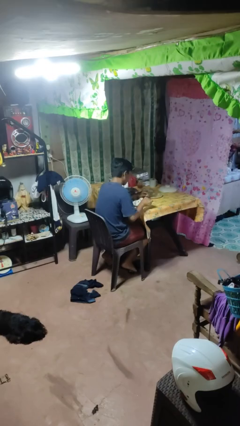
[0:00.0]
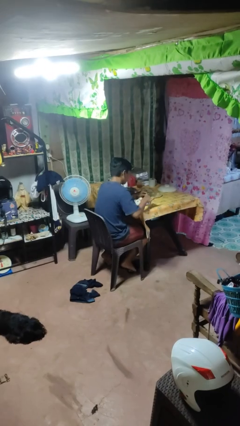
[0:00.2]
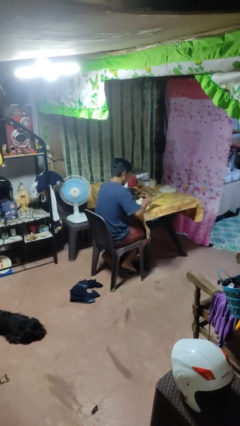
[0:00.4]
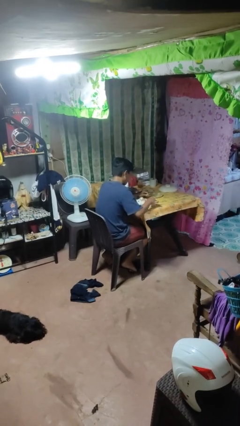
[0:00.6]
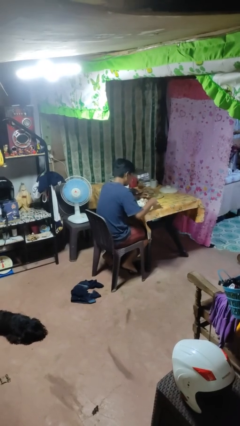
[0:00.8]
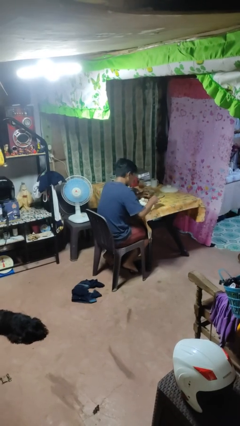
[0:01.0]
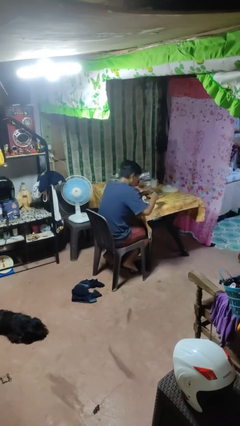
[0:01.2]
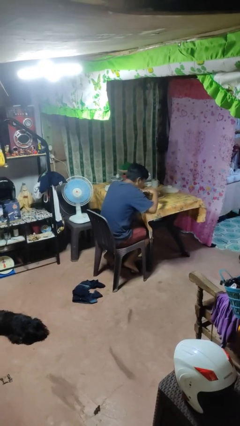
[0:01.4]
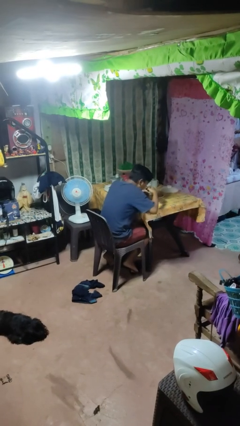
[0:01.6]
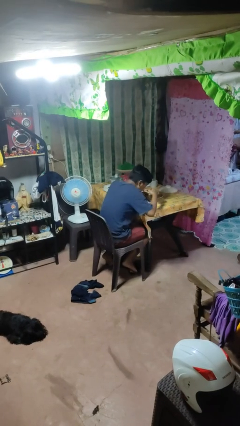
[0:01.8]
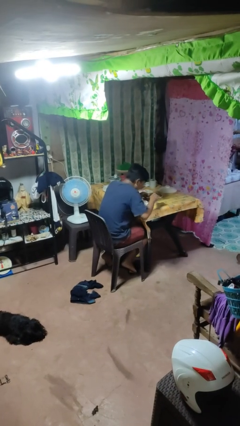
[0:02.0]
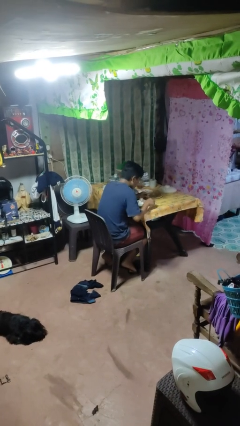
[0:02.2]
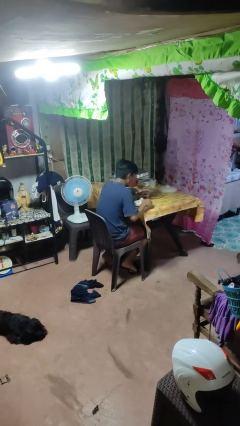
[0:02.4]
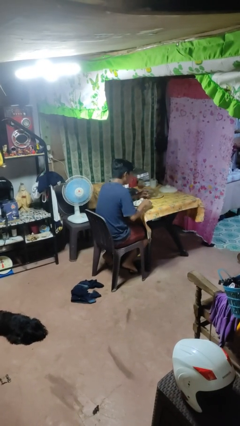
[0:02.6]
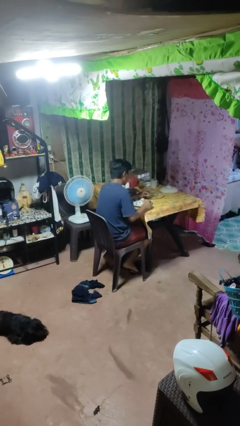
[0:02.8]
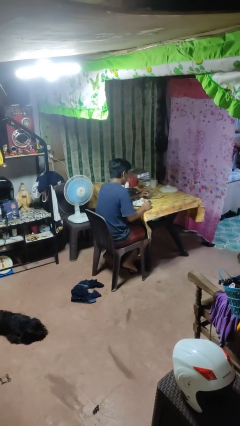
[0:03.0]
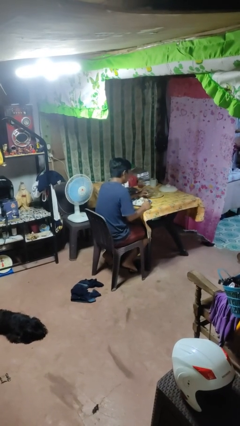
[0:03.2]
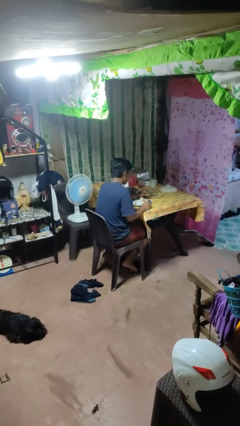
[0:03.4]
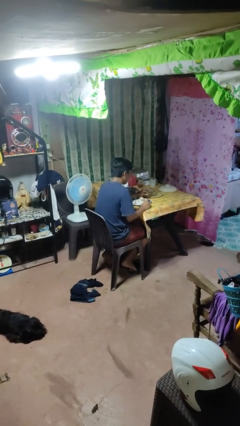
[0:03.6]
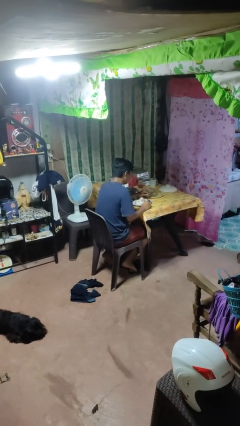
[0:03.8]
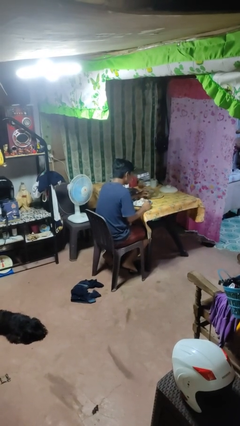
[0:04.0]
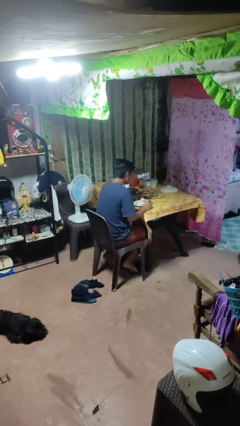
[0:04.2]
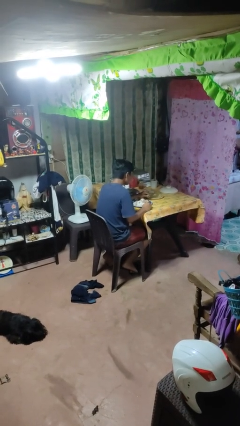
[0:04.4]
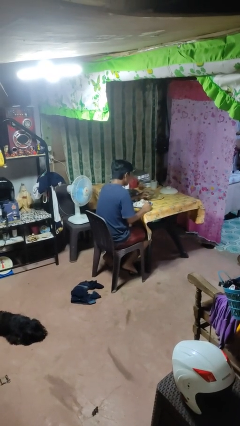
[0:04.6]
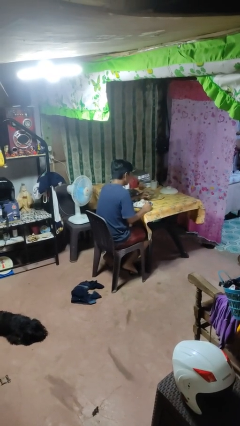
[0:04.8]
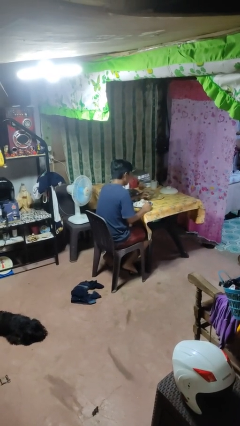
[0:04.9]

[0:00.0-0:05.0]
person eats with utensil

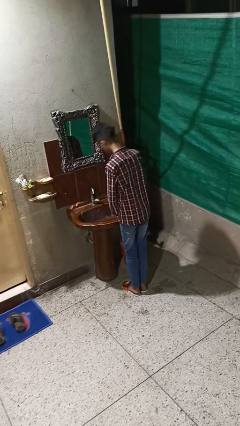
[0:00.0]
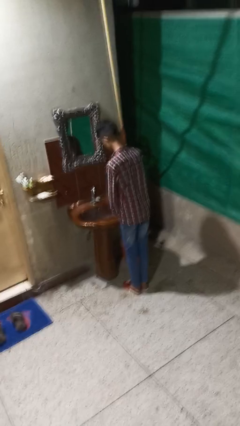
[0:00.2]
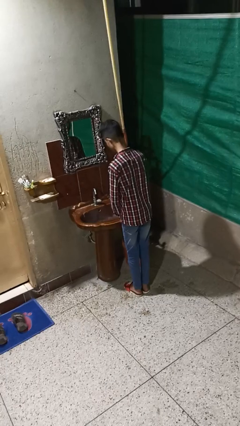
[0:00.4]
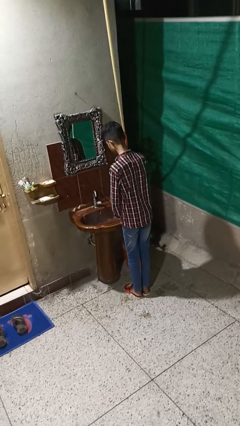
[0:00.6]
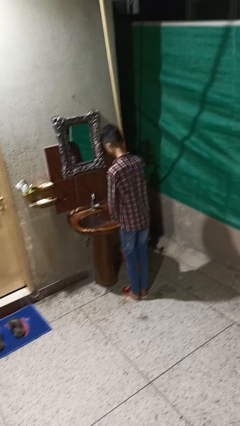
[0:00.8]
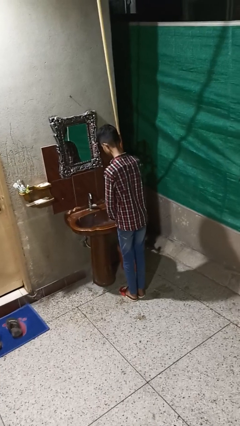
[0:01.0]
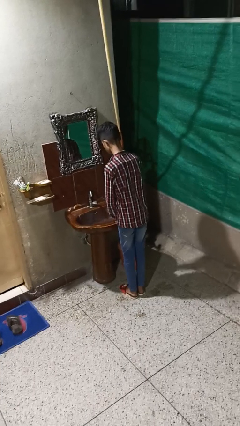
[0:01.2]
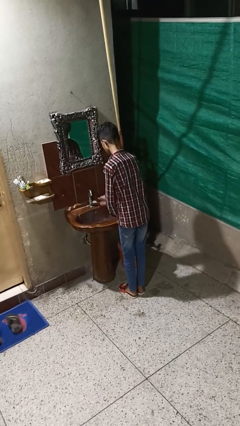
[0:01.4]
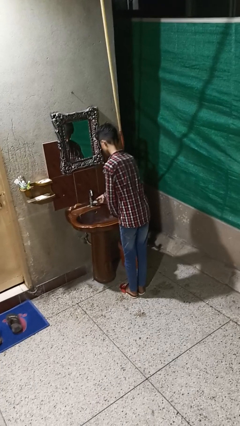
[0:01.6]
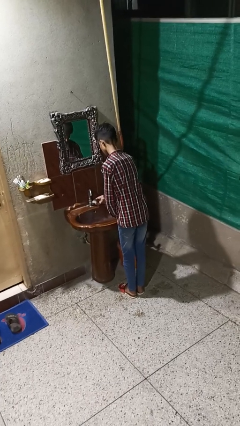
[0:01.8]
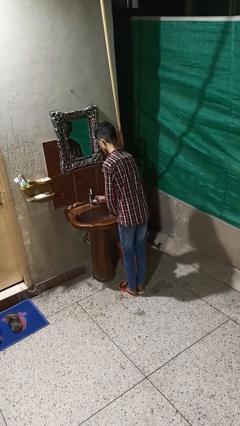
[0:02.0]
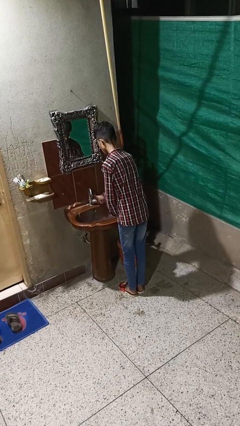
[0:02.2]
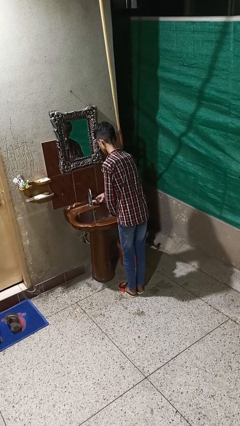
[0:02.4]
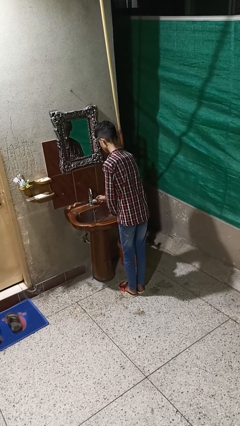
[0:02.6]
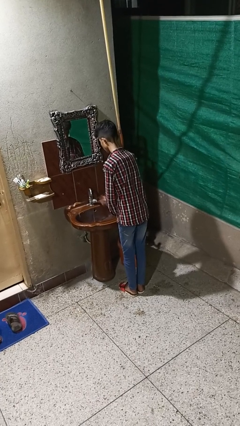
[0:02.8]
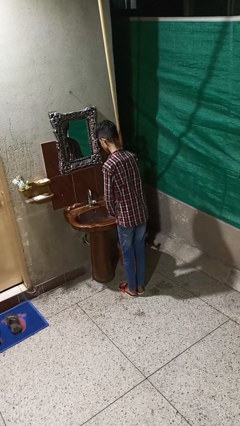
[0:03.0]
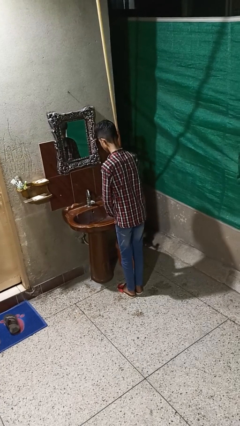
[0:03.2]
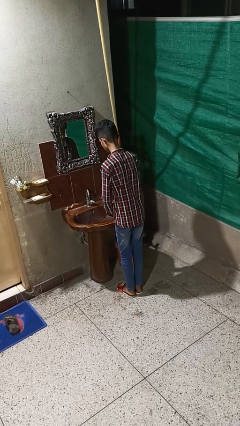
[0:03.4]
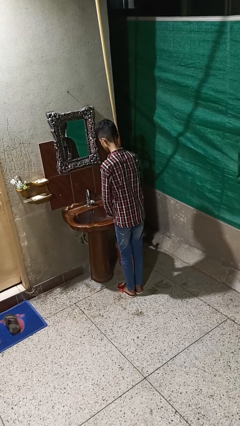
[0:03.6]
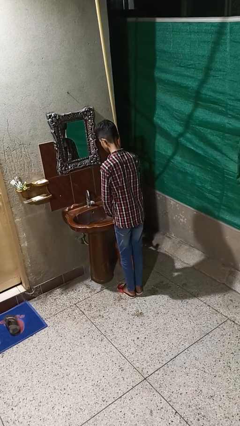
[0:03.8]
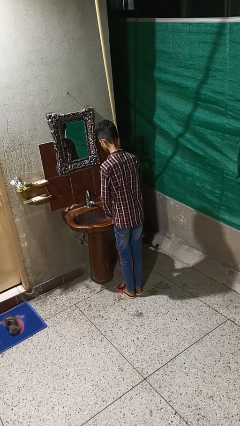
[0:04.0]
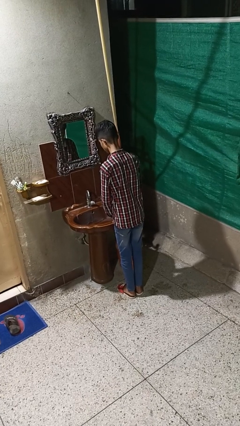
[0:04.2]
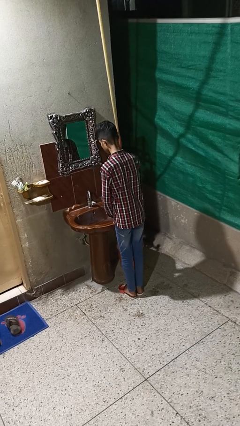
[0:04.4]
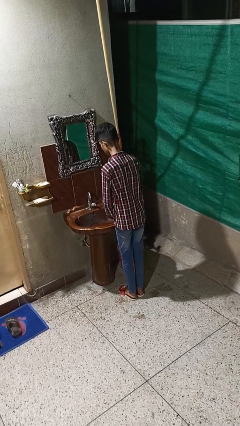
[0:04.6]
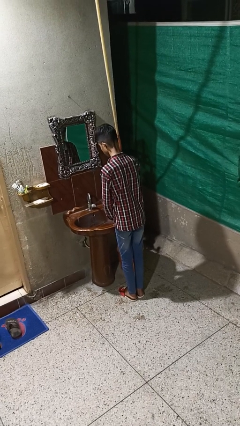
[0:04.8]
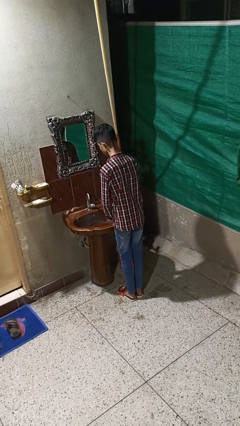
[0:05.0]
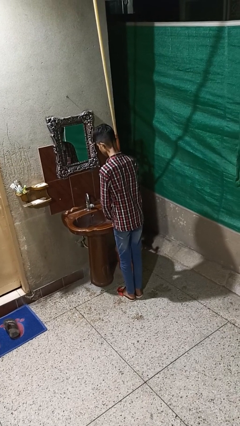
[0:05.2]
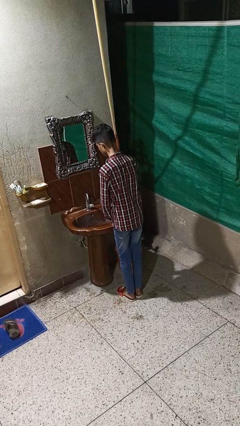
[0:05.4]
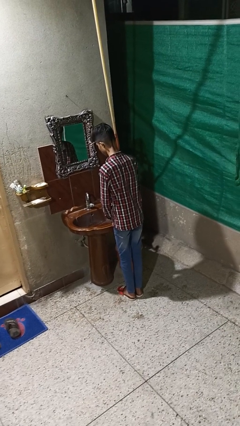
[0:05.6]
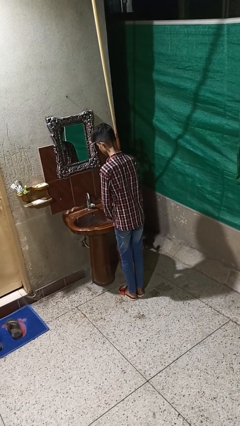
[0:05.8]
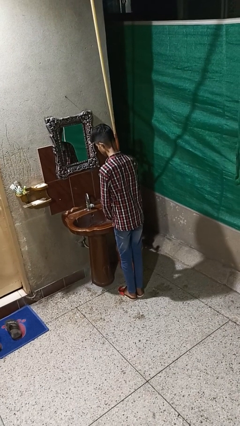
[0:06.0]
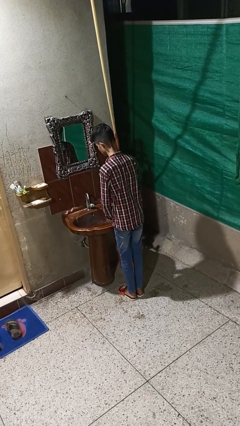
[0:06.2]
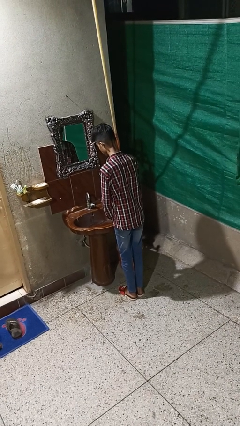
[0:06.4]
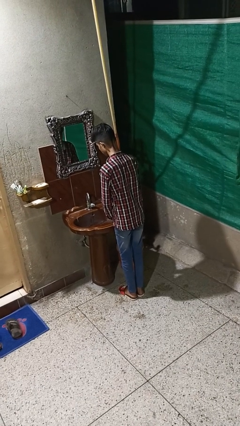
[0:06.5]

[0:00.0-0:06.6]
person turns on faucet

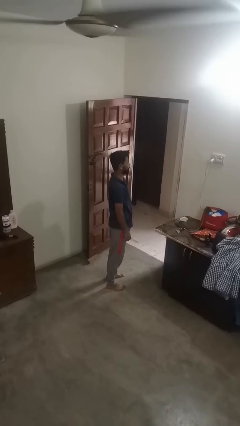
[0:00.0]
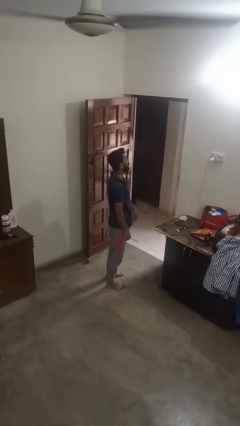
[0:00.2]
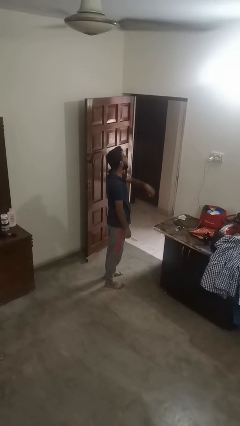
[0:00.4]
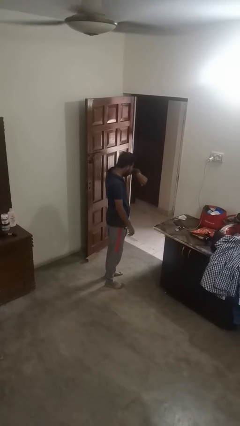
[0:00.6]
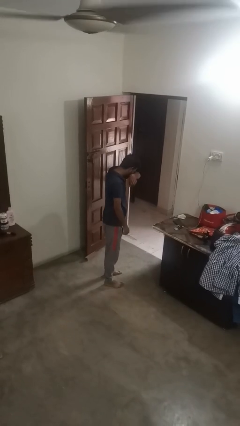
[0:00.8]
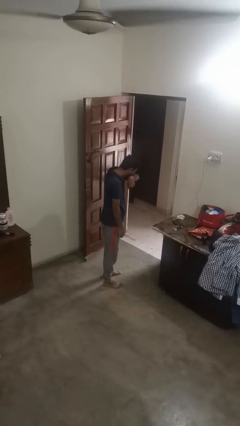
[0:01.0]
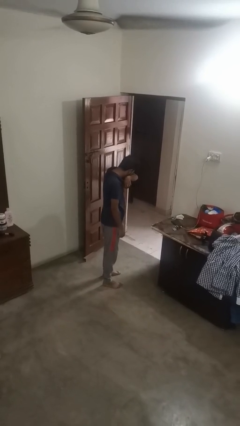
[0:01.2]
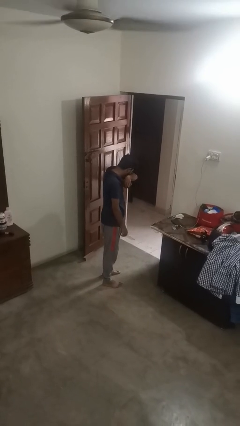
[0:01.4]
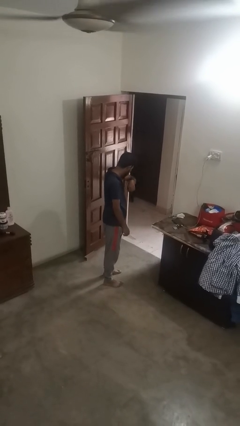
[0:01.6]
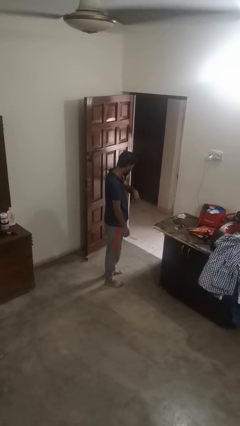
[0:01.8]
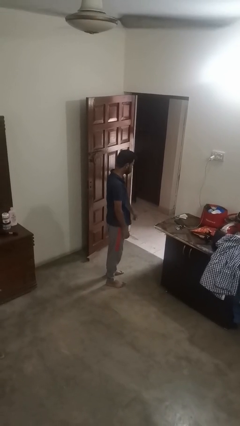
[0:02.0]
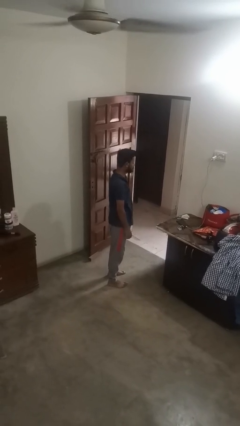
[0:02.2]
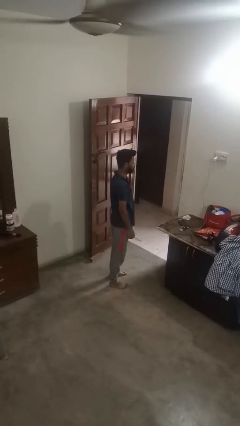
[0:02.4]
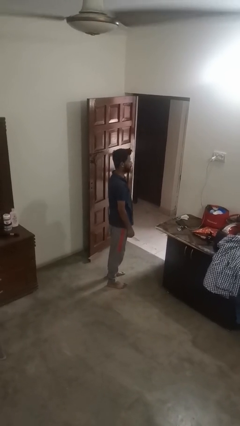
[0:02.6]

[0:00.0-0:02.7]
person sneezes into arm

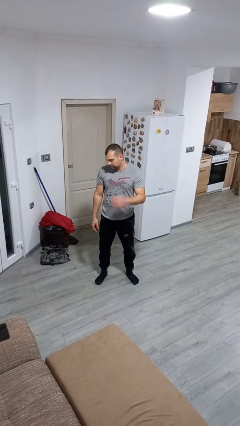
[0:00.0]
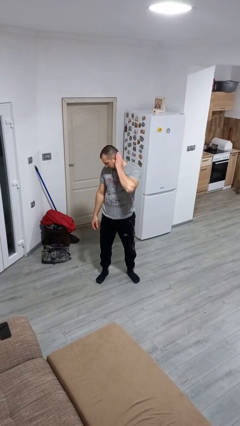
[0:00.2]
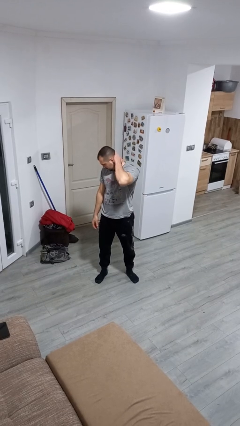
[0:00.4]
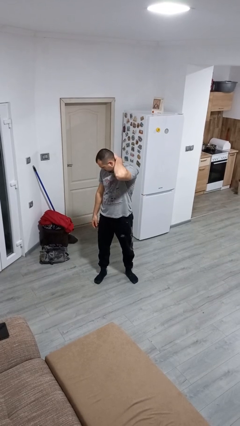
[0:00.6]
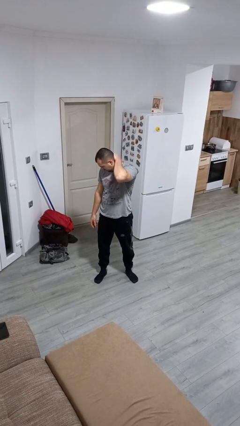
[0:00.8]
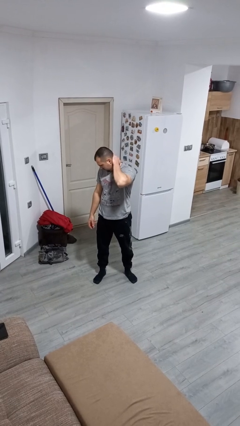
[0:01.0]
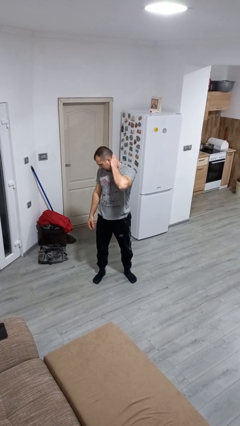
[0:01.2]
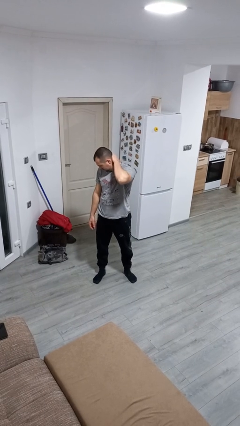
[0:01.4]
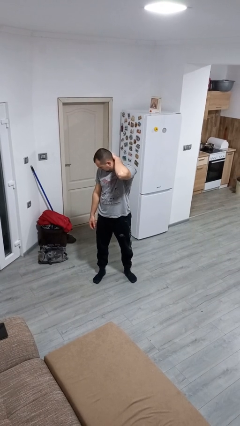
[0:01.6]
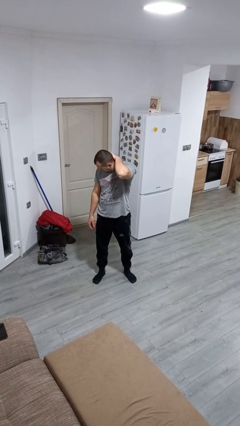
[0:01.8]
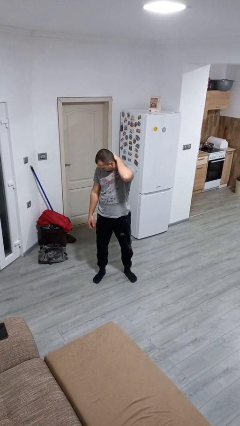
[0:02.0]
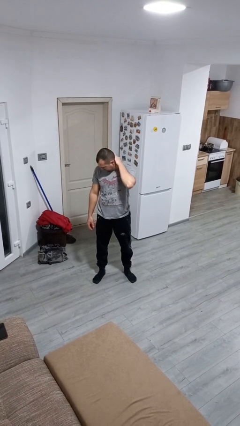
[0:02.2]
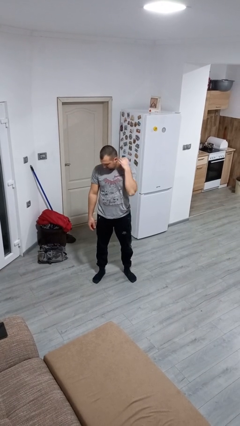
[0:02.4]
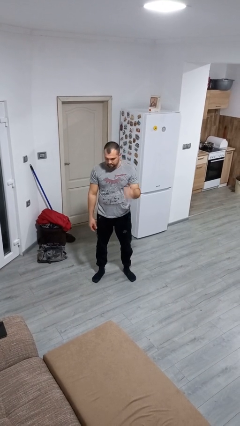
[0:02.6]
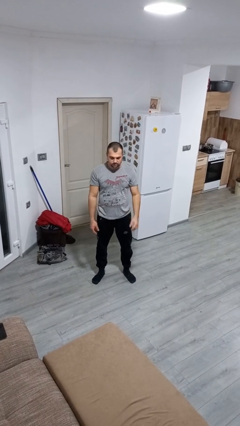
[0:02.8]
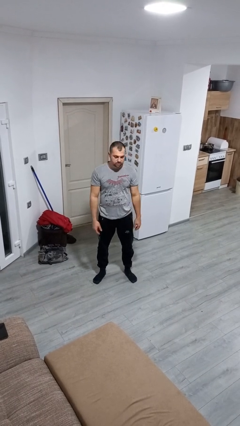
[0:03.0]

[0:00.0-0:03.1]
person rubs neck

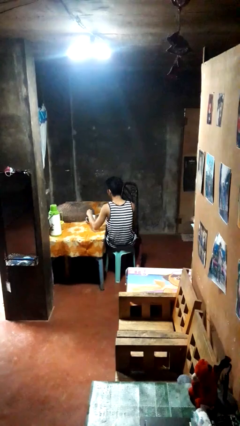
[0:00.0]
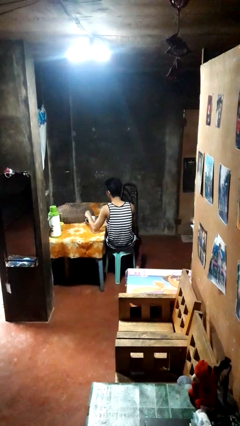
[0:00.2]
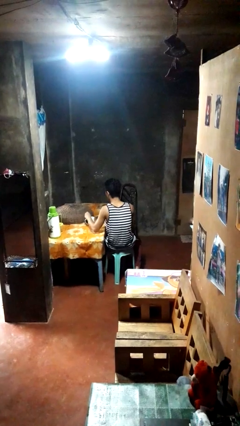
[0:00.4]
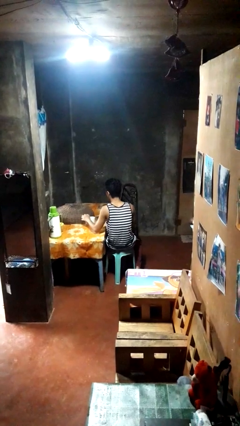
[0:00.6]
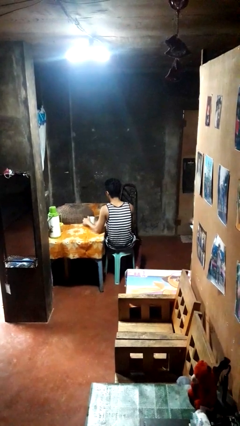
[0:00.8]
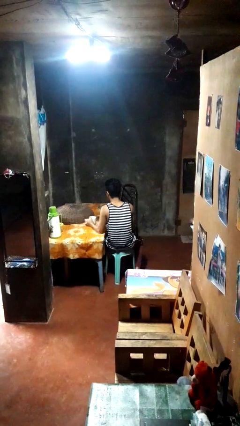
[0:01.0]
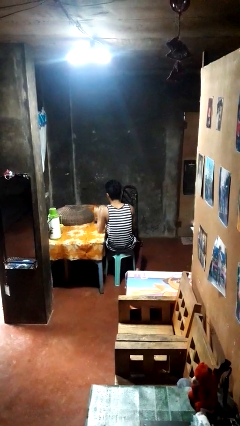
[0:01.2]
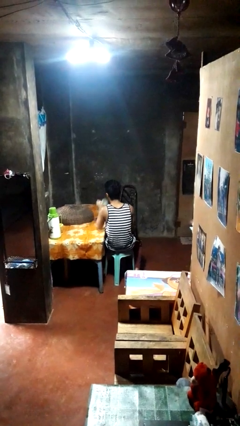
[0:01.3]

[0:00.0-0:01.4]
person stirs mug
